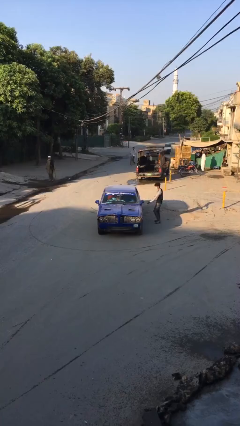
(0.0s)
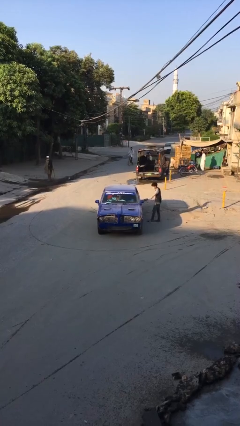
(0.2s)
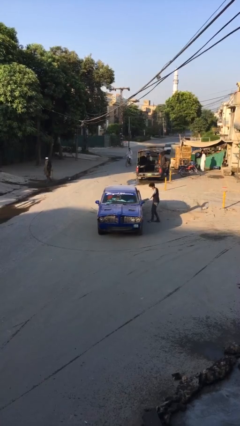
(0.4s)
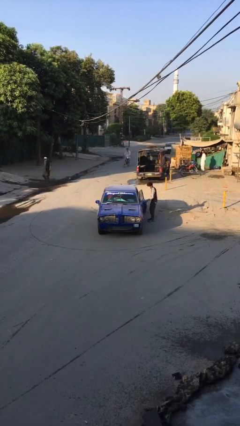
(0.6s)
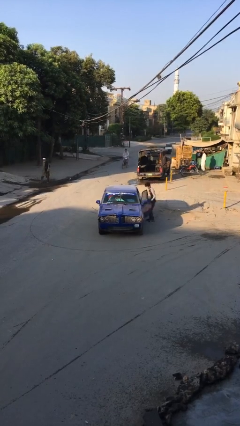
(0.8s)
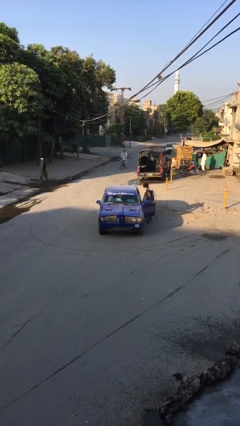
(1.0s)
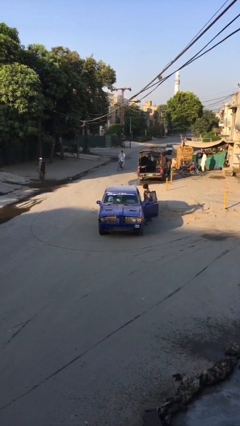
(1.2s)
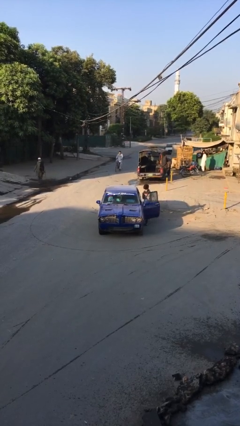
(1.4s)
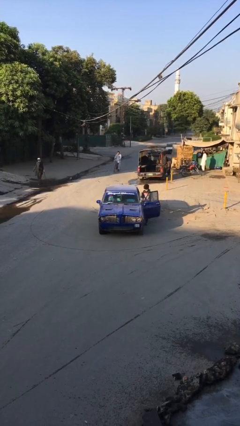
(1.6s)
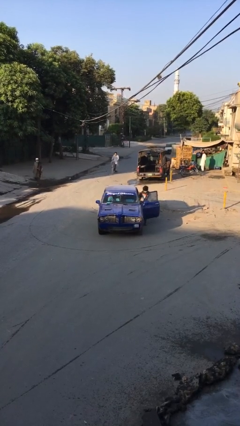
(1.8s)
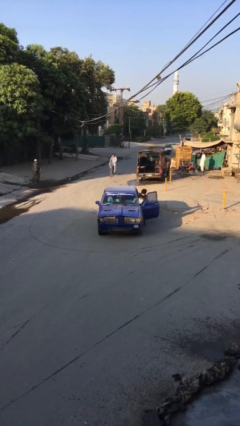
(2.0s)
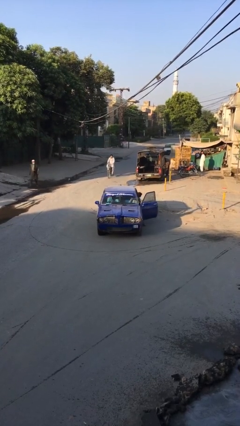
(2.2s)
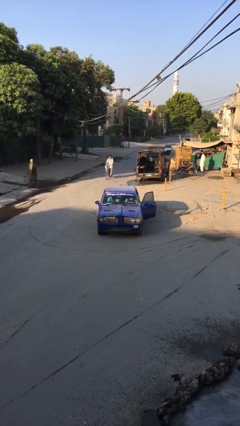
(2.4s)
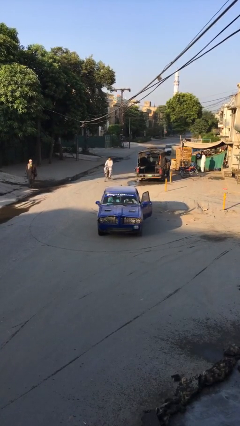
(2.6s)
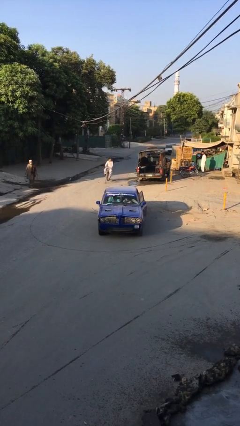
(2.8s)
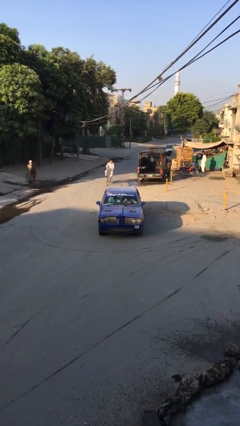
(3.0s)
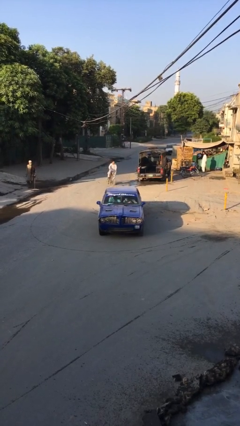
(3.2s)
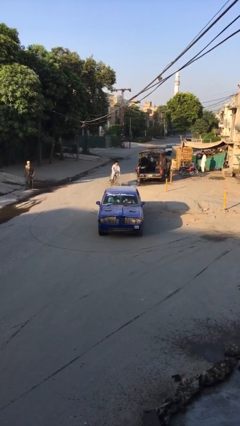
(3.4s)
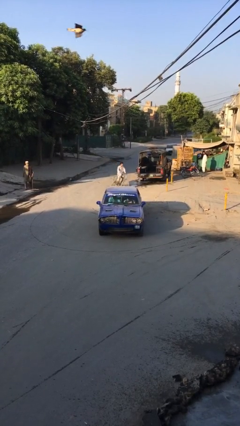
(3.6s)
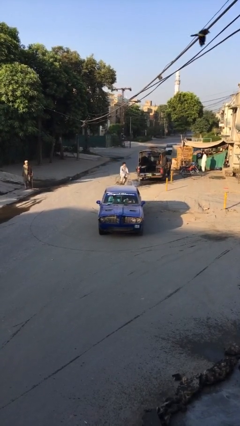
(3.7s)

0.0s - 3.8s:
car picks up person

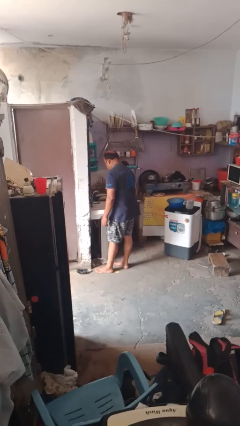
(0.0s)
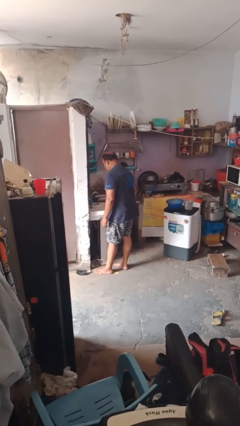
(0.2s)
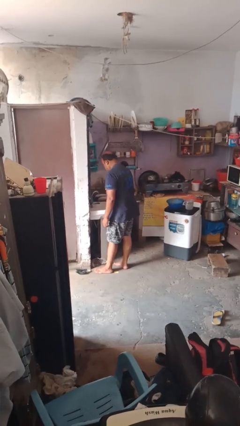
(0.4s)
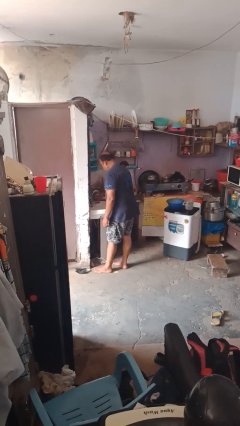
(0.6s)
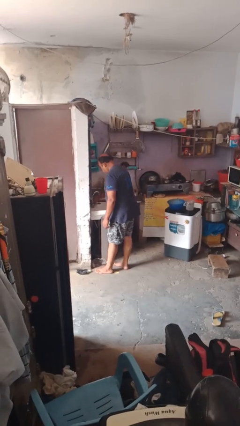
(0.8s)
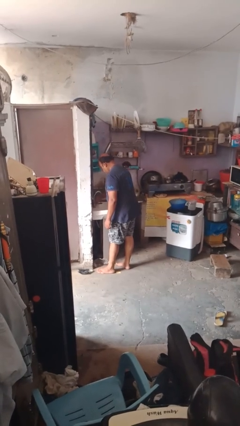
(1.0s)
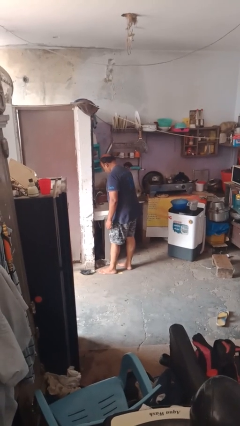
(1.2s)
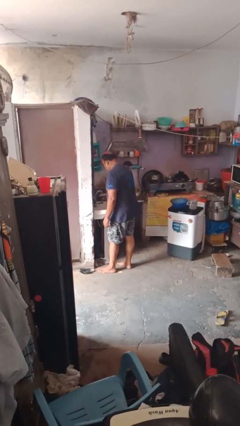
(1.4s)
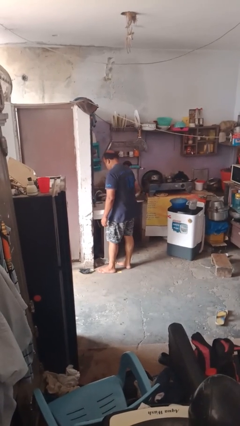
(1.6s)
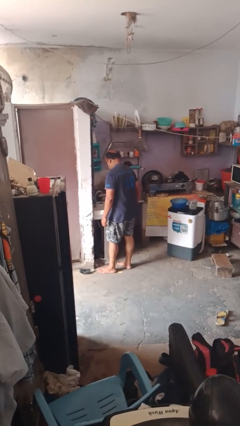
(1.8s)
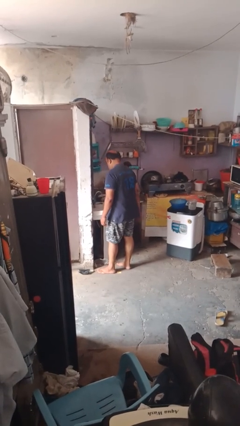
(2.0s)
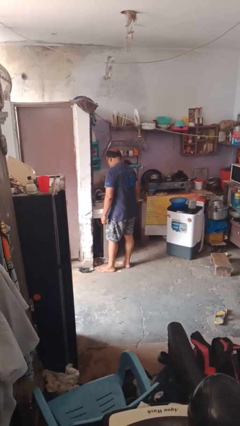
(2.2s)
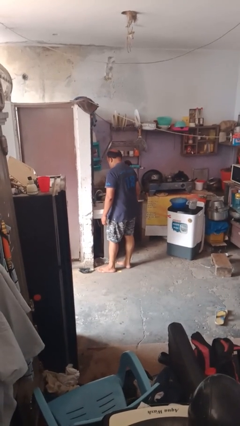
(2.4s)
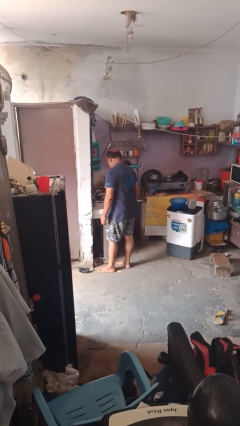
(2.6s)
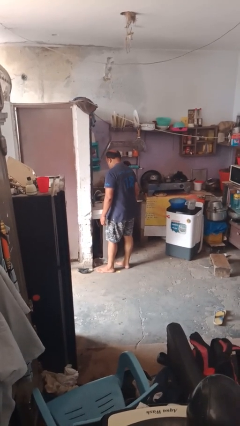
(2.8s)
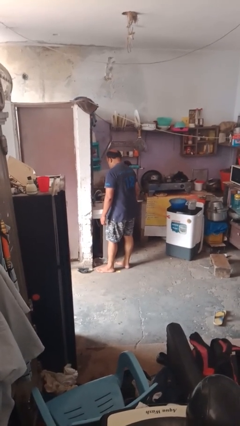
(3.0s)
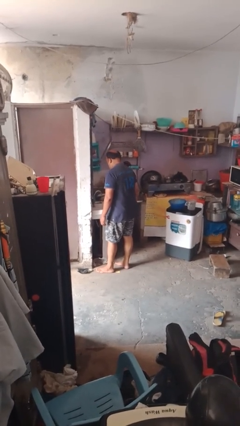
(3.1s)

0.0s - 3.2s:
person turns on faucet

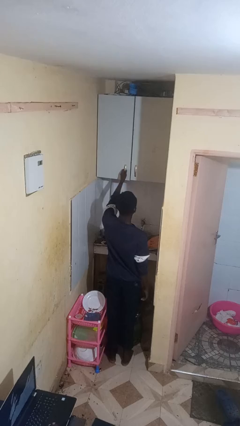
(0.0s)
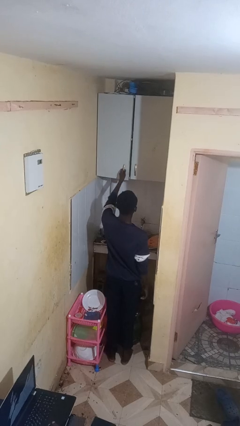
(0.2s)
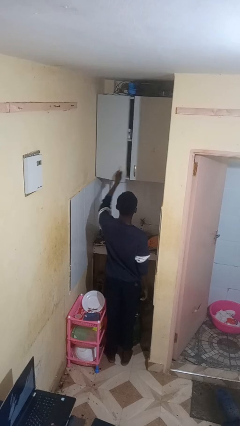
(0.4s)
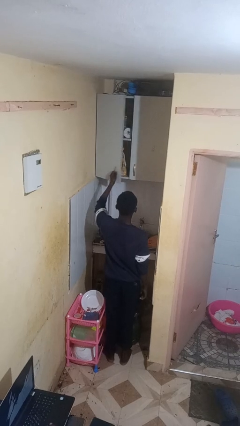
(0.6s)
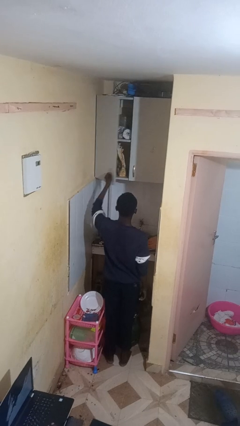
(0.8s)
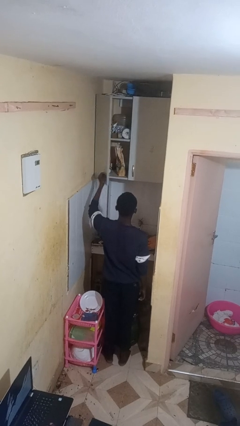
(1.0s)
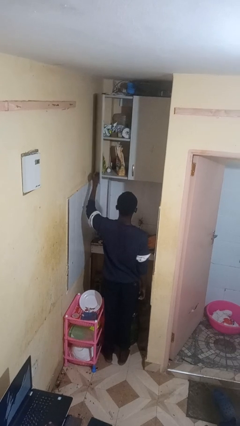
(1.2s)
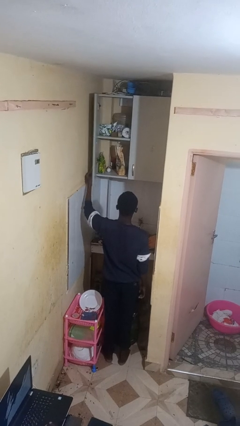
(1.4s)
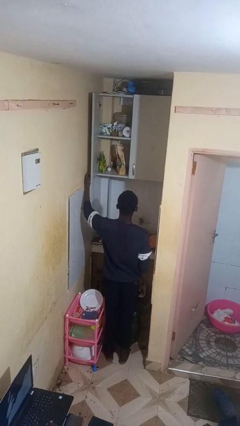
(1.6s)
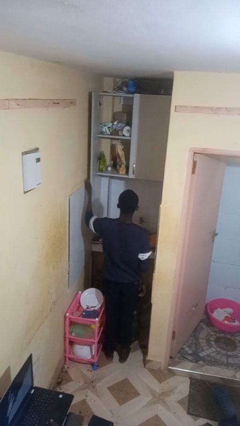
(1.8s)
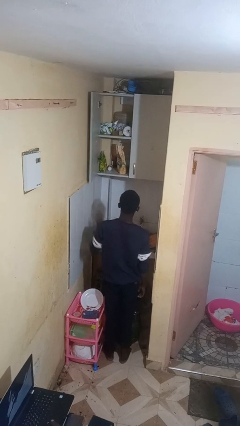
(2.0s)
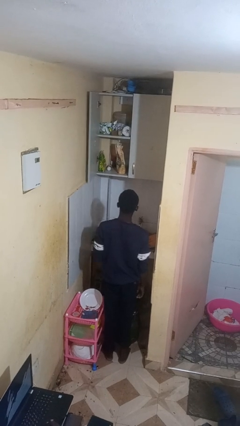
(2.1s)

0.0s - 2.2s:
person opens cabinet

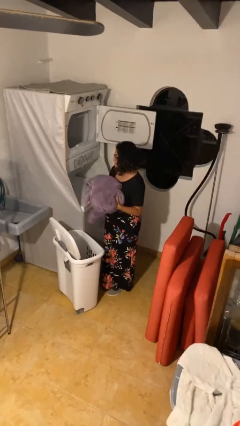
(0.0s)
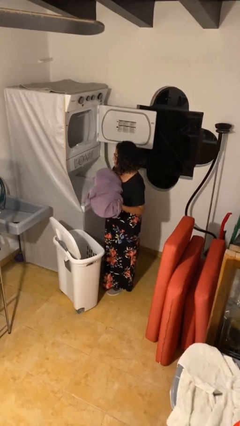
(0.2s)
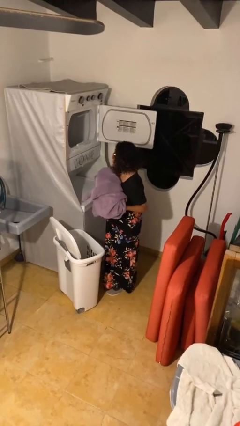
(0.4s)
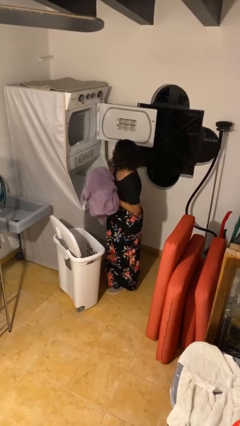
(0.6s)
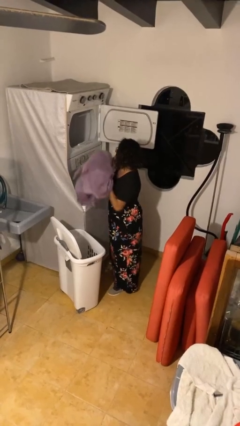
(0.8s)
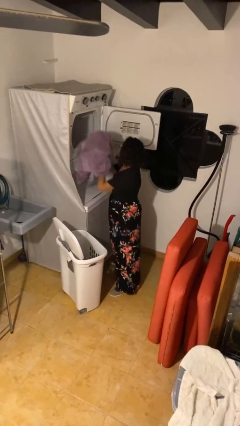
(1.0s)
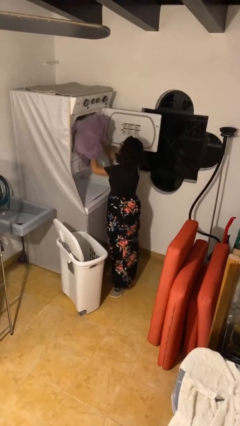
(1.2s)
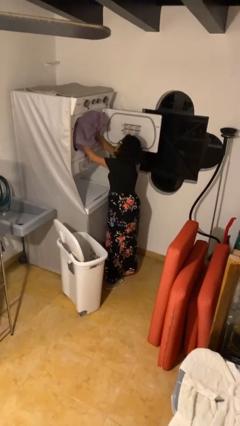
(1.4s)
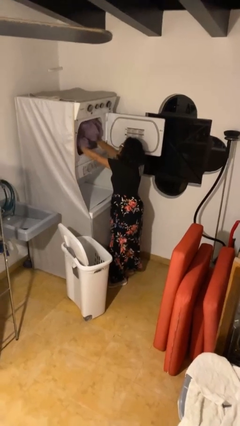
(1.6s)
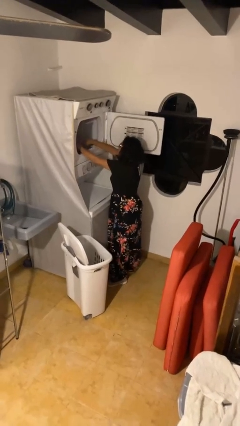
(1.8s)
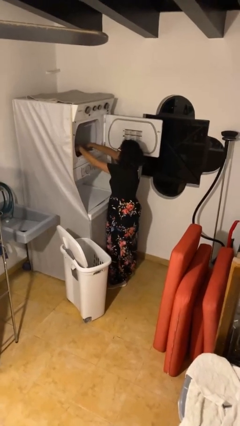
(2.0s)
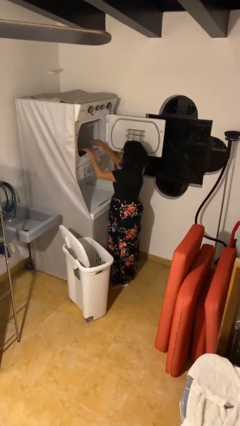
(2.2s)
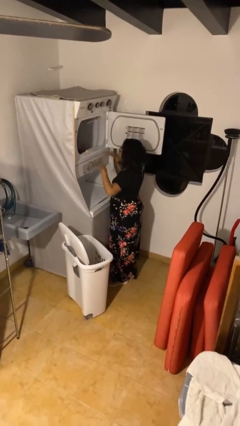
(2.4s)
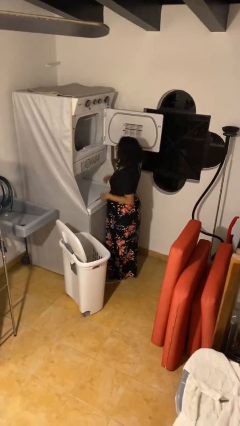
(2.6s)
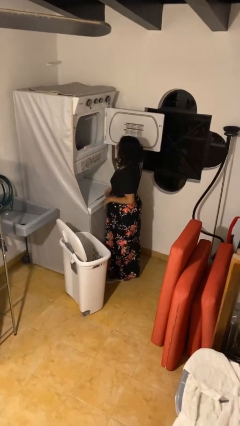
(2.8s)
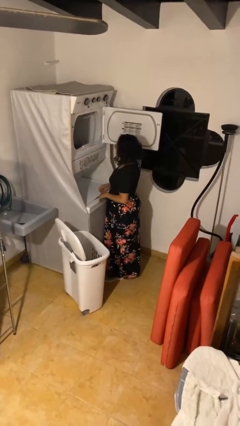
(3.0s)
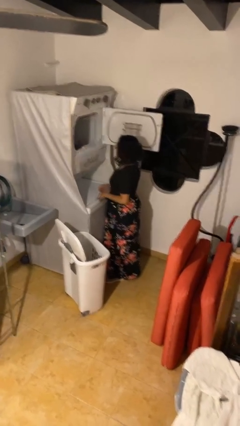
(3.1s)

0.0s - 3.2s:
person loads dryer

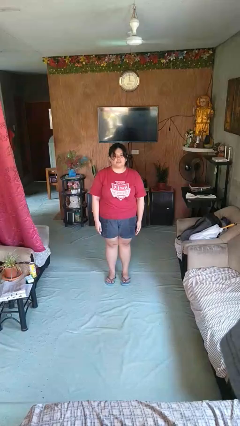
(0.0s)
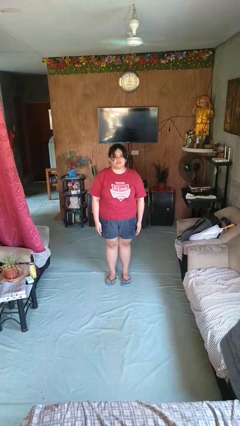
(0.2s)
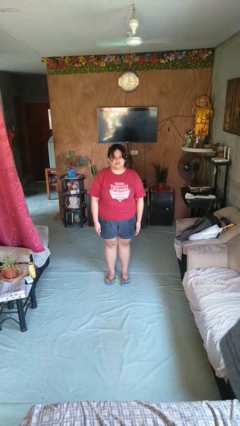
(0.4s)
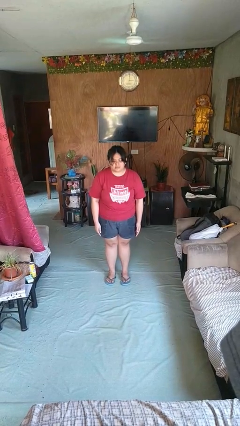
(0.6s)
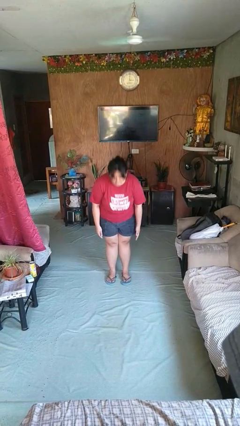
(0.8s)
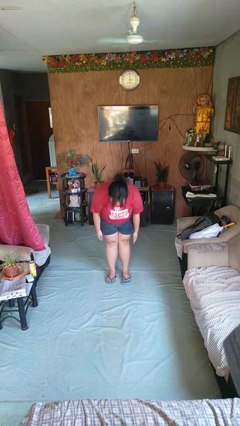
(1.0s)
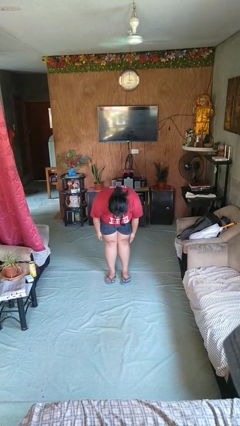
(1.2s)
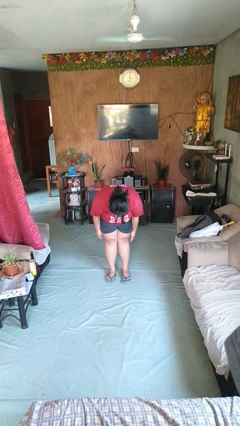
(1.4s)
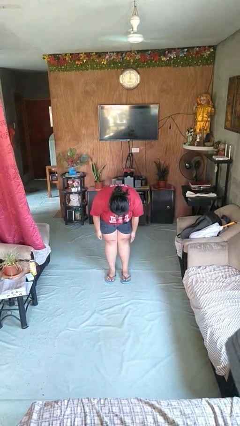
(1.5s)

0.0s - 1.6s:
person bows

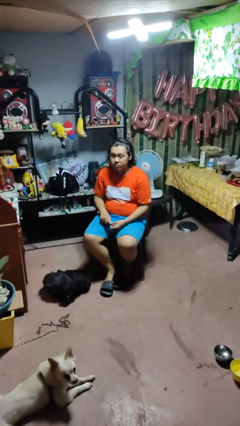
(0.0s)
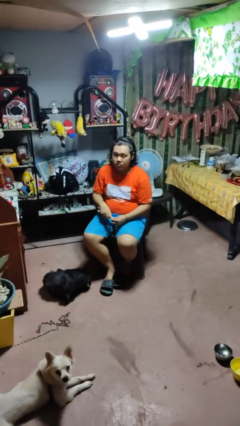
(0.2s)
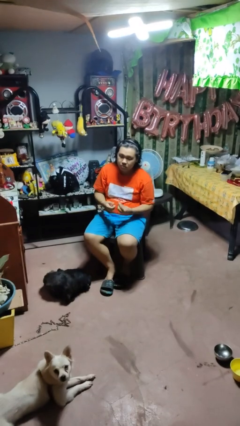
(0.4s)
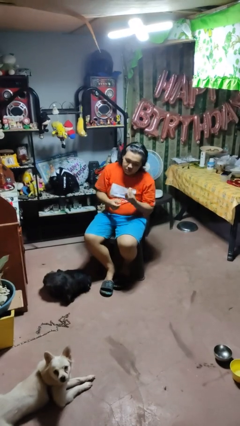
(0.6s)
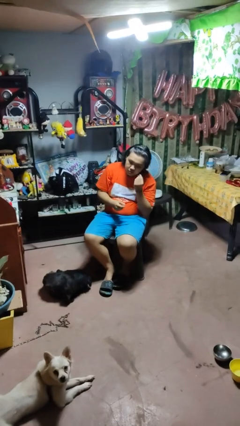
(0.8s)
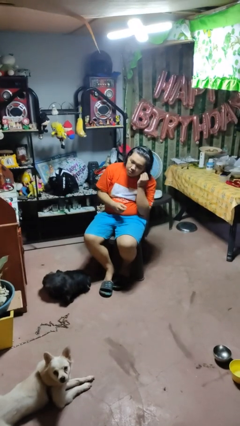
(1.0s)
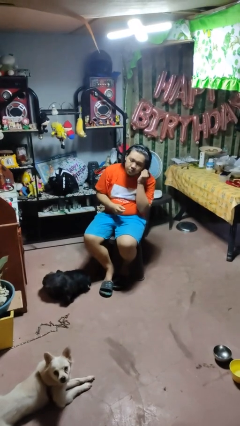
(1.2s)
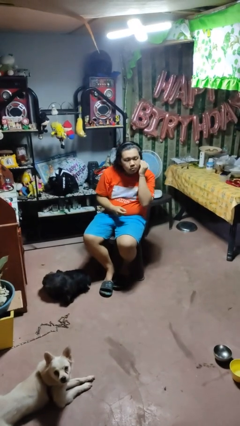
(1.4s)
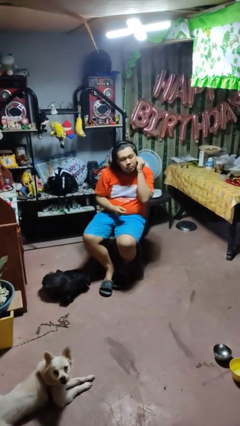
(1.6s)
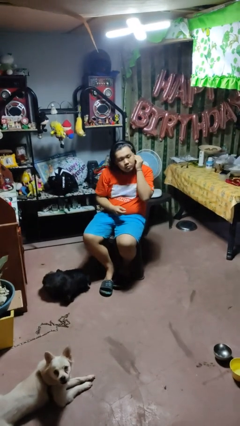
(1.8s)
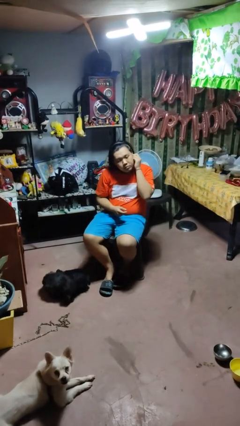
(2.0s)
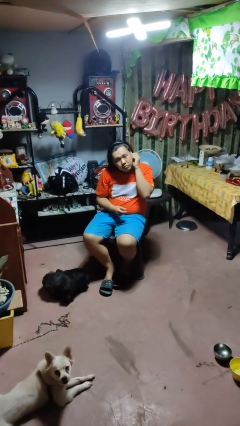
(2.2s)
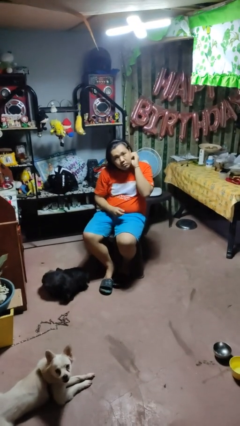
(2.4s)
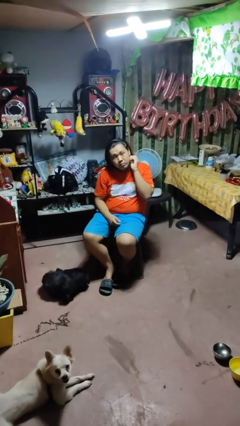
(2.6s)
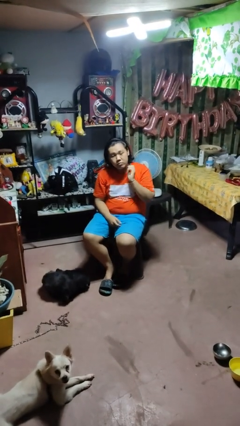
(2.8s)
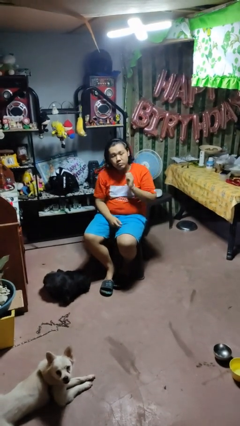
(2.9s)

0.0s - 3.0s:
person puts on earrings

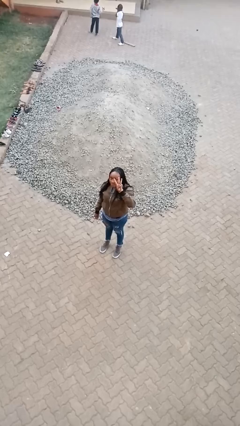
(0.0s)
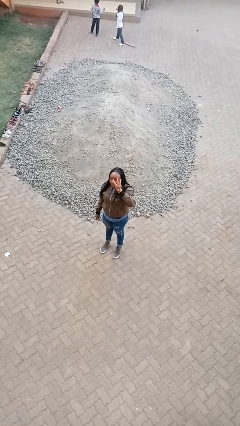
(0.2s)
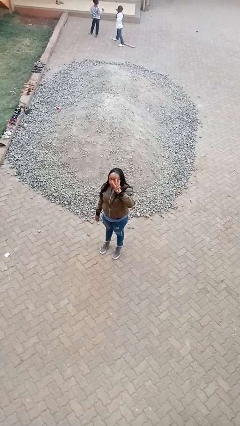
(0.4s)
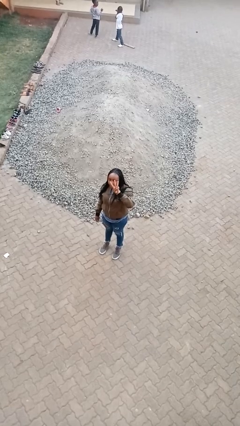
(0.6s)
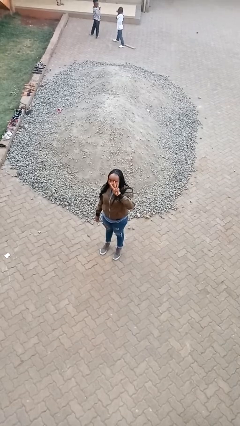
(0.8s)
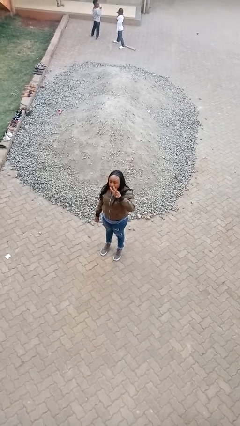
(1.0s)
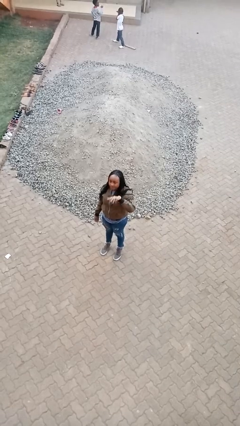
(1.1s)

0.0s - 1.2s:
person gestures number three
